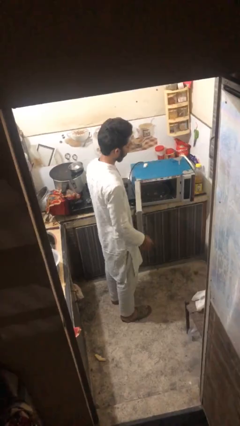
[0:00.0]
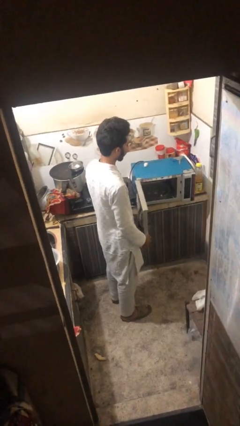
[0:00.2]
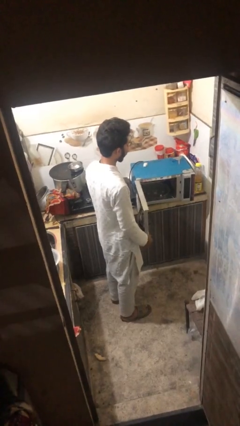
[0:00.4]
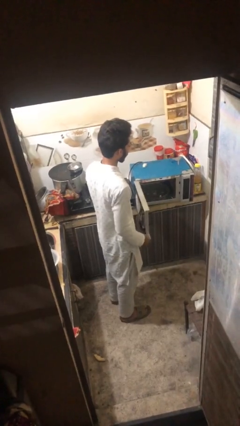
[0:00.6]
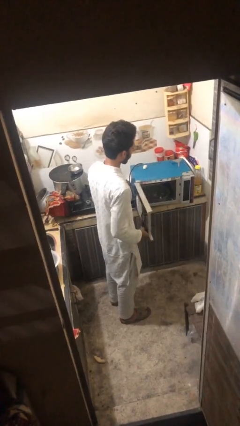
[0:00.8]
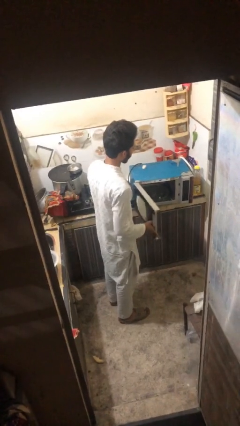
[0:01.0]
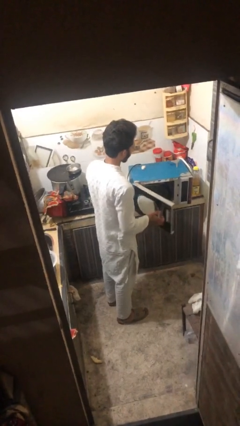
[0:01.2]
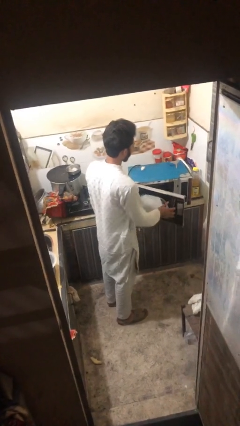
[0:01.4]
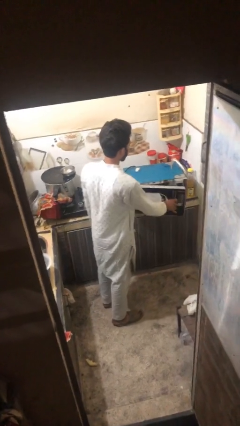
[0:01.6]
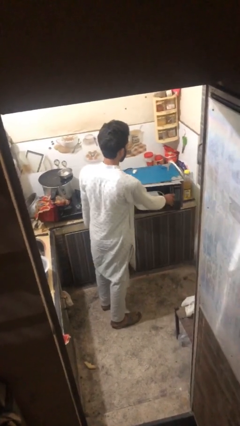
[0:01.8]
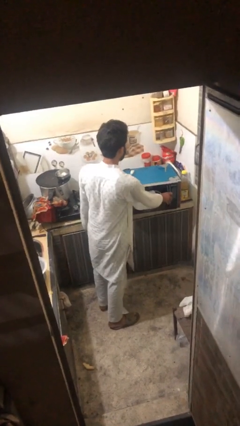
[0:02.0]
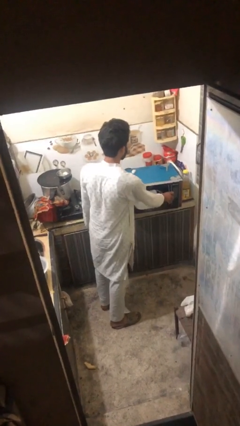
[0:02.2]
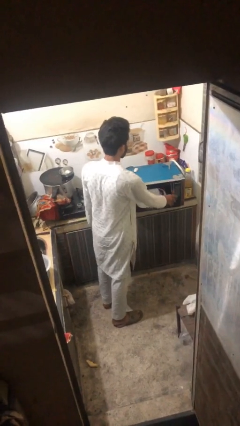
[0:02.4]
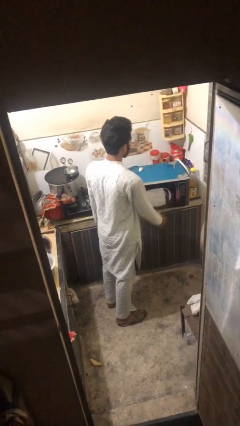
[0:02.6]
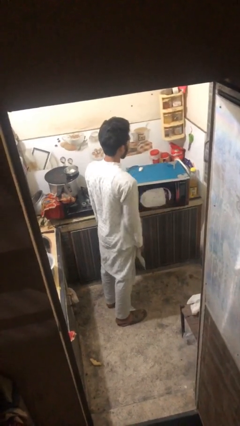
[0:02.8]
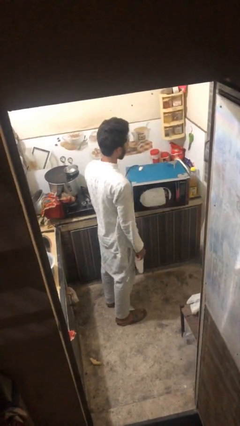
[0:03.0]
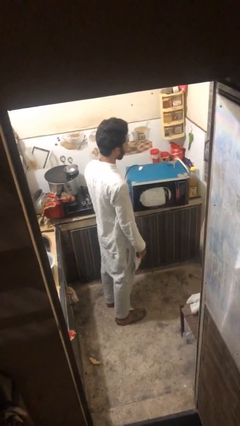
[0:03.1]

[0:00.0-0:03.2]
person closes oven door

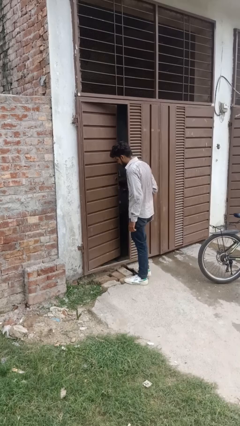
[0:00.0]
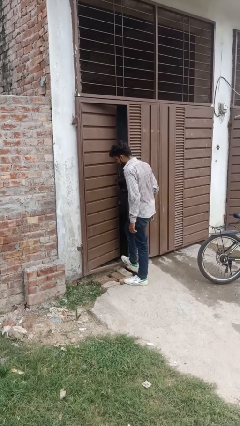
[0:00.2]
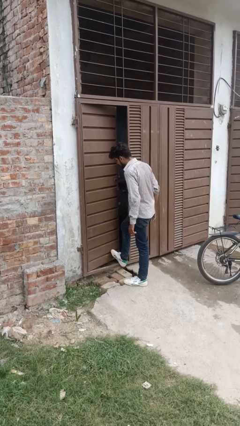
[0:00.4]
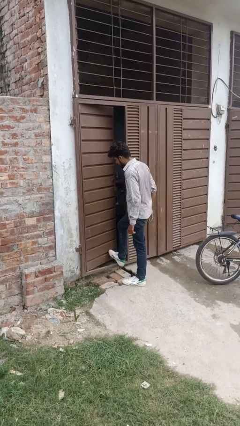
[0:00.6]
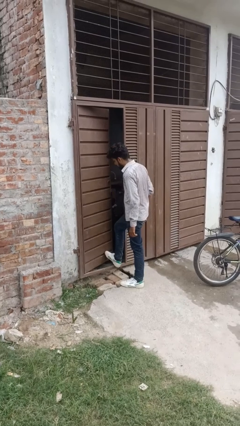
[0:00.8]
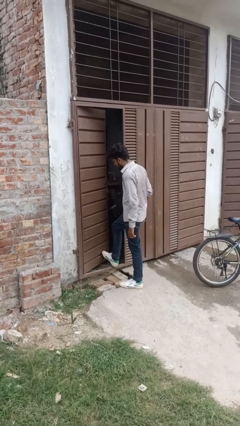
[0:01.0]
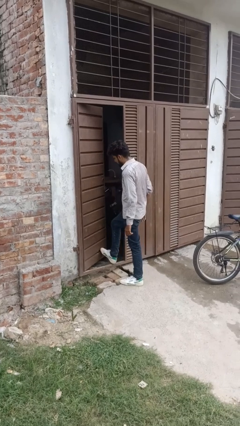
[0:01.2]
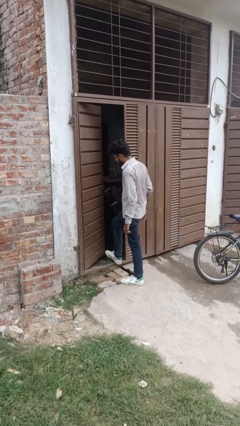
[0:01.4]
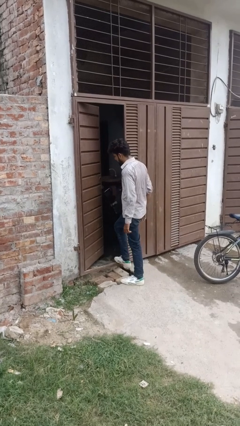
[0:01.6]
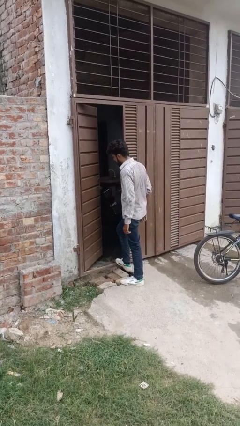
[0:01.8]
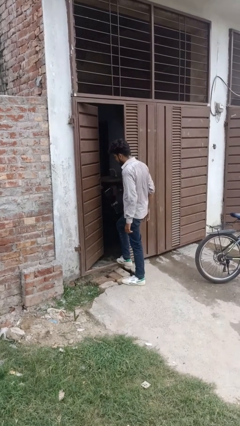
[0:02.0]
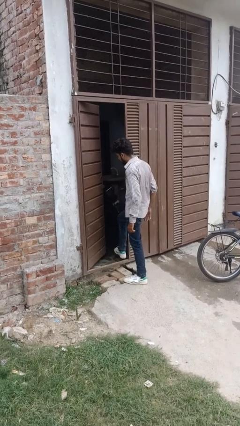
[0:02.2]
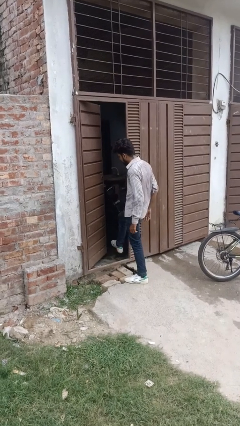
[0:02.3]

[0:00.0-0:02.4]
person opens facility door

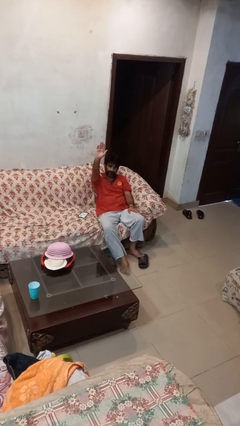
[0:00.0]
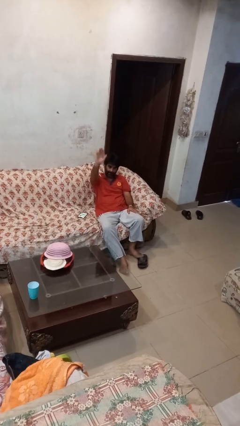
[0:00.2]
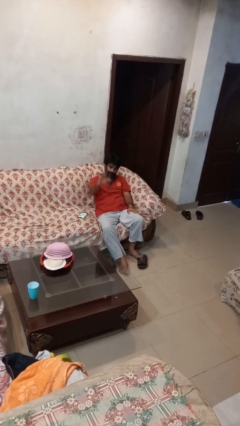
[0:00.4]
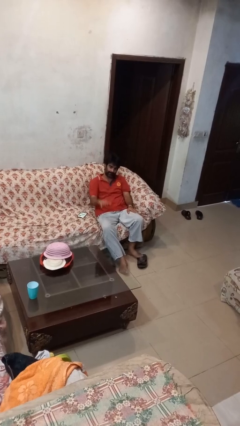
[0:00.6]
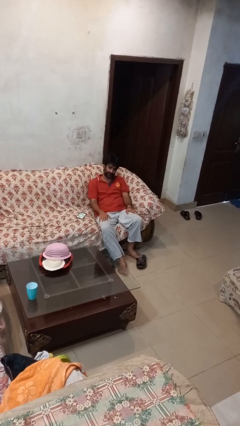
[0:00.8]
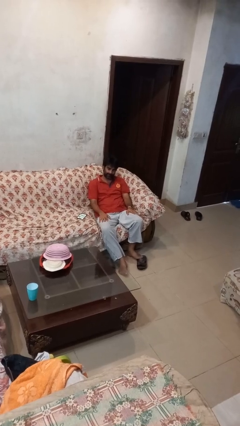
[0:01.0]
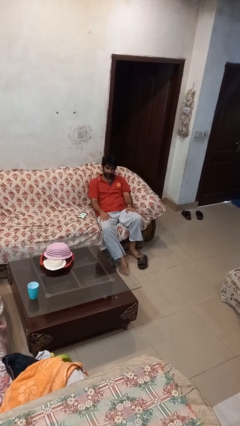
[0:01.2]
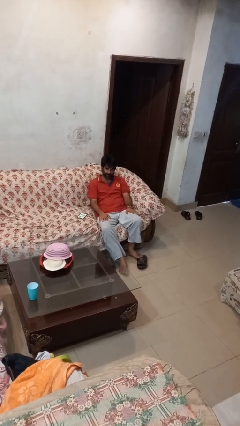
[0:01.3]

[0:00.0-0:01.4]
person gestures lower hand

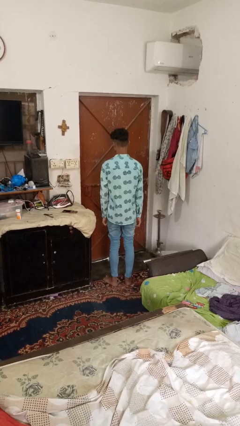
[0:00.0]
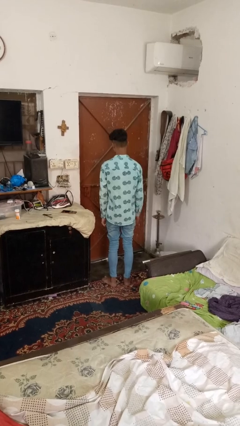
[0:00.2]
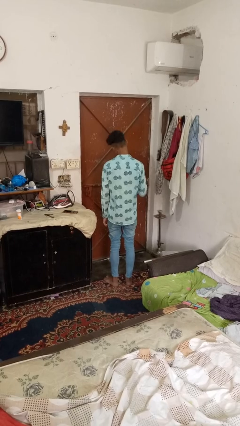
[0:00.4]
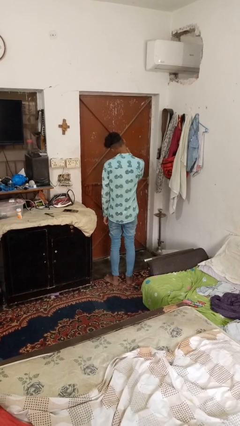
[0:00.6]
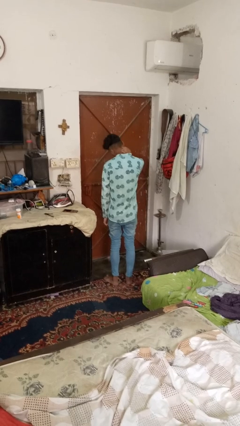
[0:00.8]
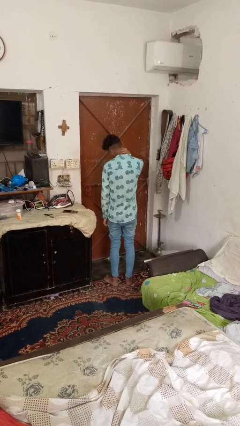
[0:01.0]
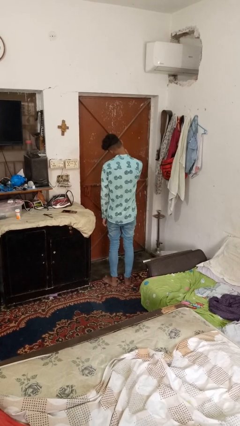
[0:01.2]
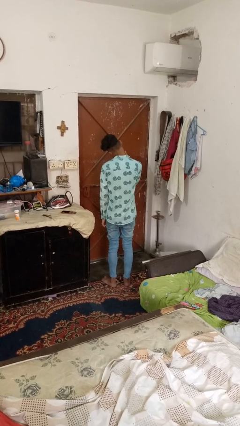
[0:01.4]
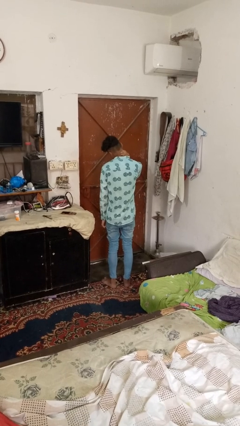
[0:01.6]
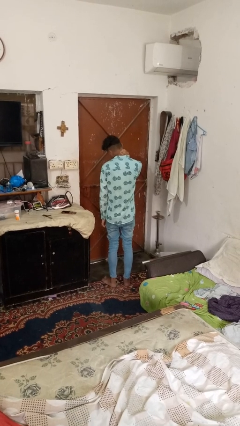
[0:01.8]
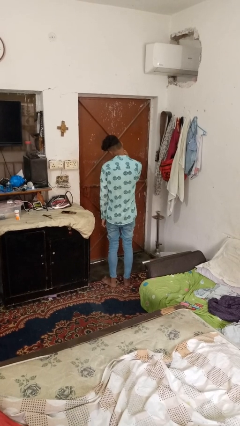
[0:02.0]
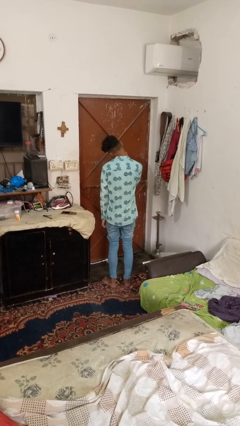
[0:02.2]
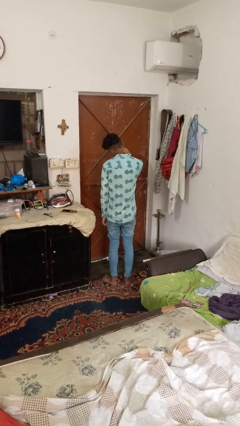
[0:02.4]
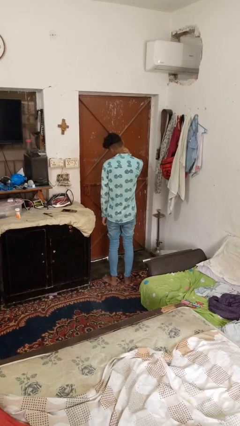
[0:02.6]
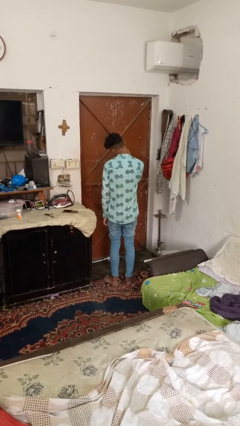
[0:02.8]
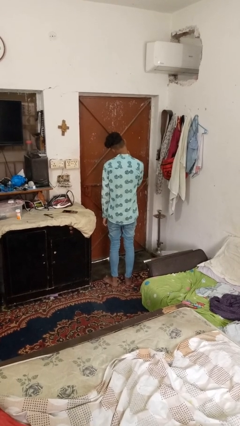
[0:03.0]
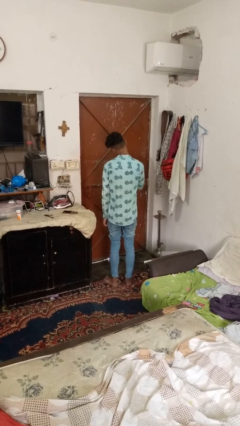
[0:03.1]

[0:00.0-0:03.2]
person rubs neck

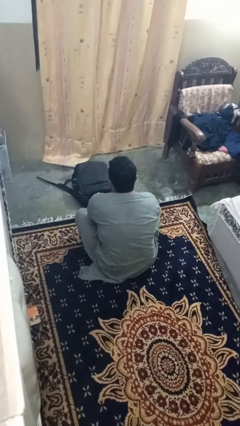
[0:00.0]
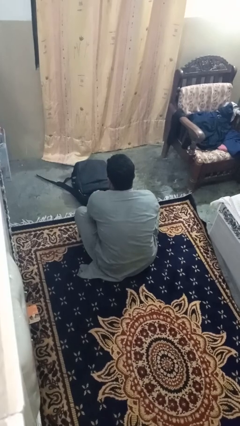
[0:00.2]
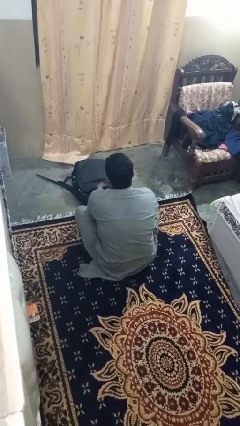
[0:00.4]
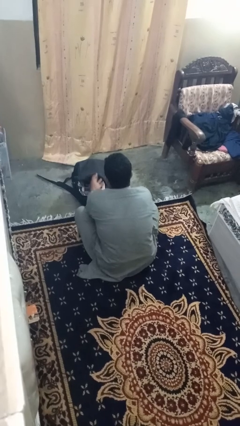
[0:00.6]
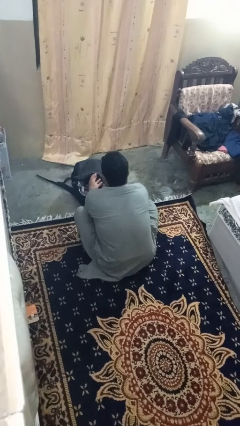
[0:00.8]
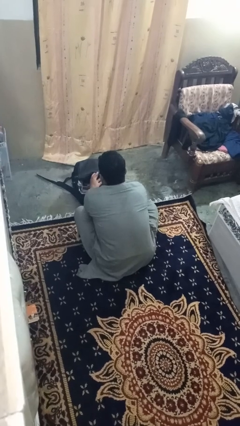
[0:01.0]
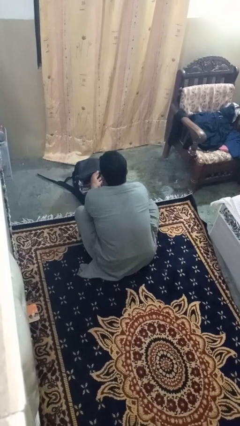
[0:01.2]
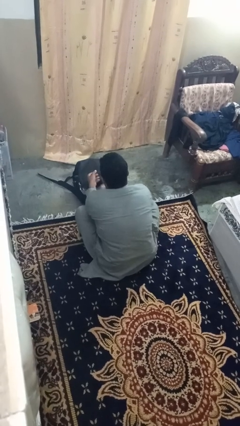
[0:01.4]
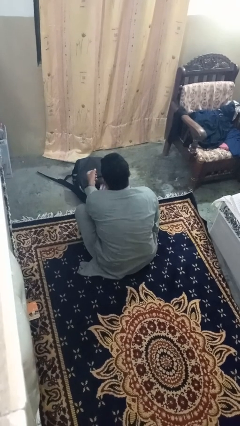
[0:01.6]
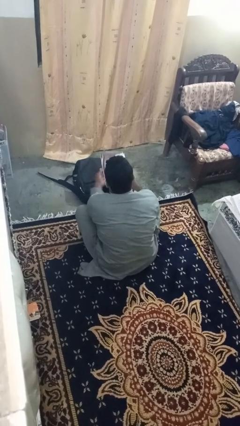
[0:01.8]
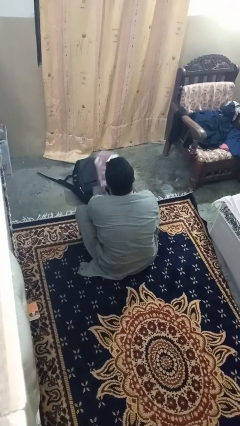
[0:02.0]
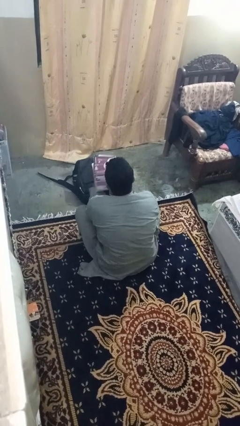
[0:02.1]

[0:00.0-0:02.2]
person takes object from bag

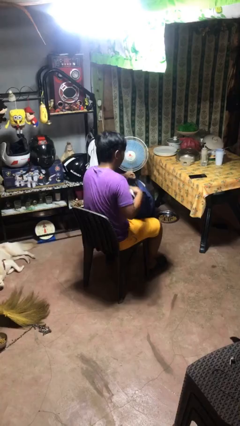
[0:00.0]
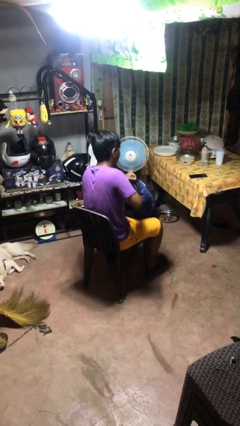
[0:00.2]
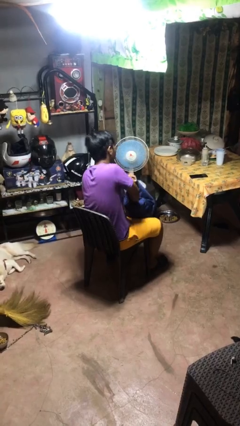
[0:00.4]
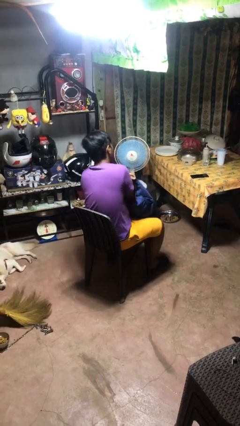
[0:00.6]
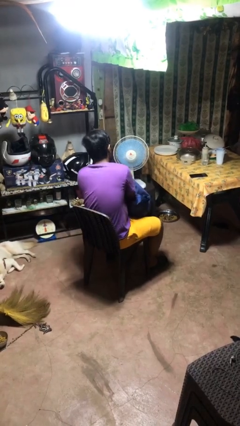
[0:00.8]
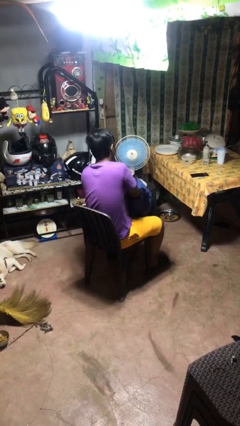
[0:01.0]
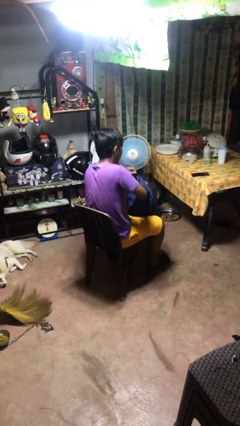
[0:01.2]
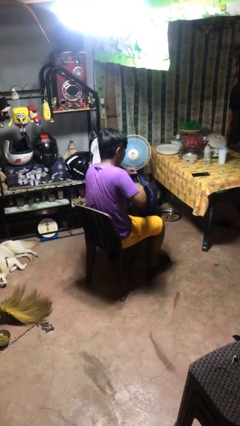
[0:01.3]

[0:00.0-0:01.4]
person puts object into backpack

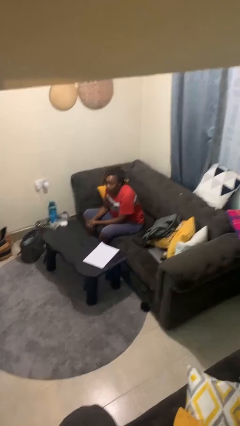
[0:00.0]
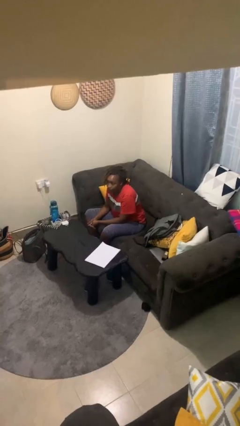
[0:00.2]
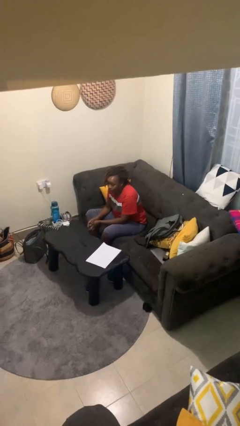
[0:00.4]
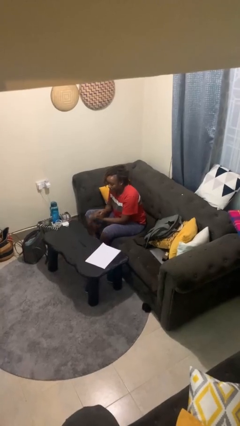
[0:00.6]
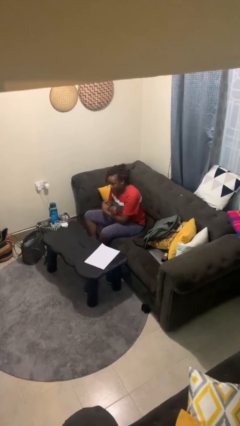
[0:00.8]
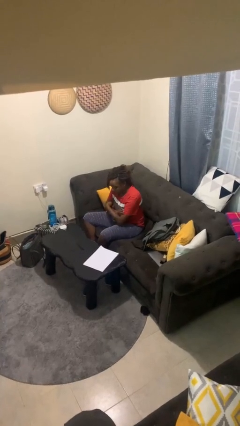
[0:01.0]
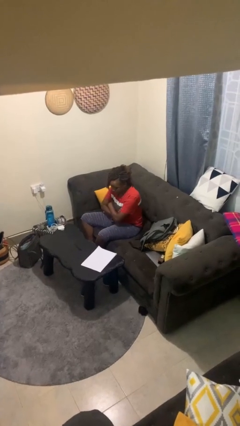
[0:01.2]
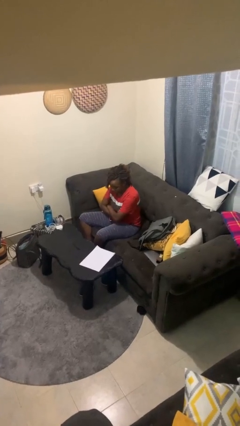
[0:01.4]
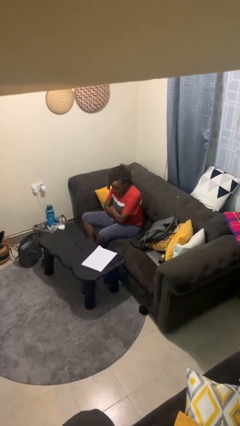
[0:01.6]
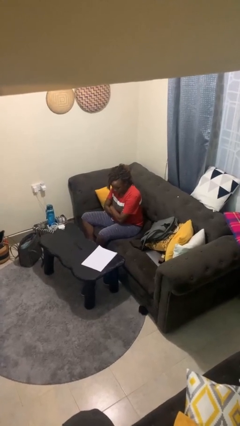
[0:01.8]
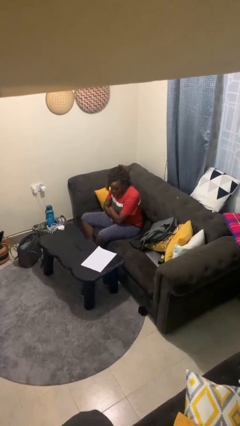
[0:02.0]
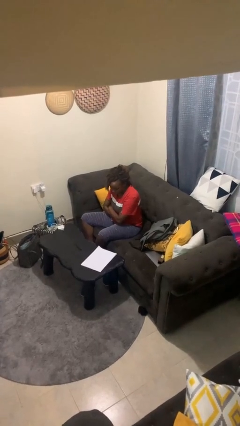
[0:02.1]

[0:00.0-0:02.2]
person crosses arms

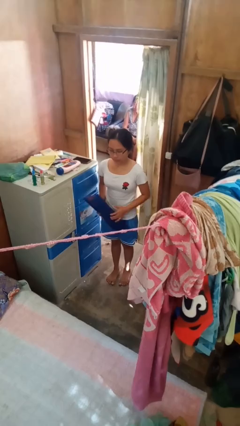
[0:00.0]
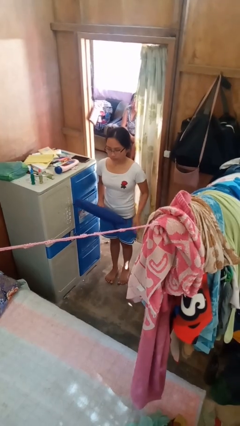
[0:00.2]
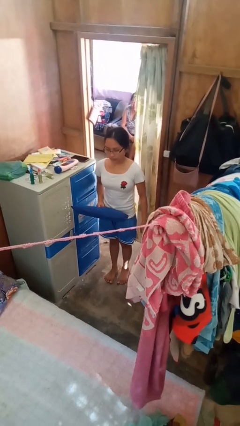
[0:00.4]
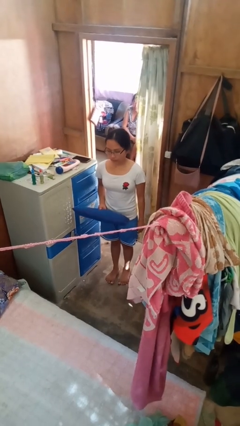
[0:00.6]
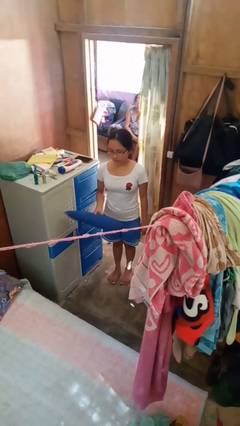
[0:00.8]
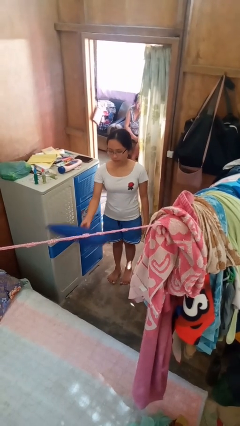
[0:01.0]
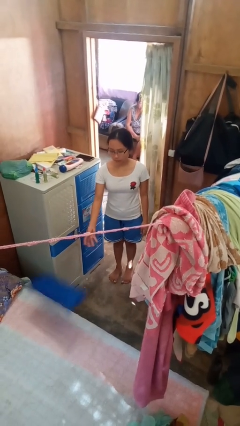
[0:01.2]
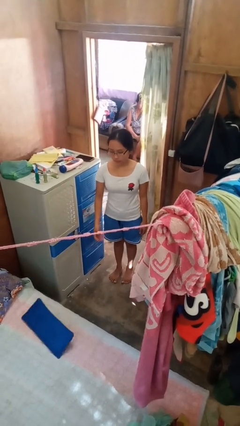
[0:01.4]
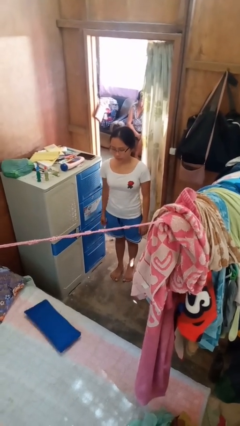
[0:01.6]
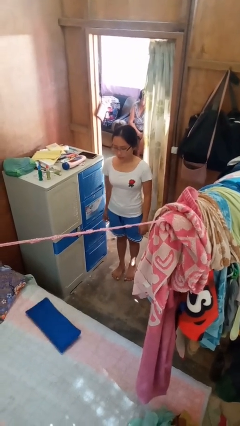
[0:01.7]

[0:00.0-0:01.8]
person throws object on bed
